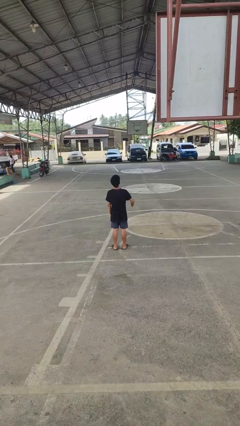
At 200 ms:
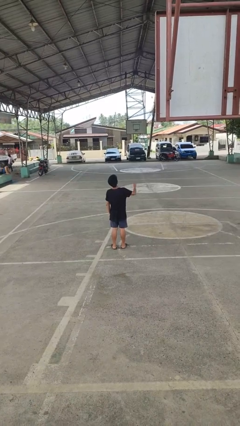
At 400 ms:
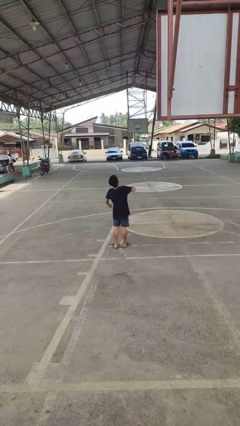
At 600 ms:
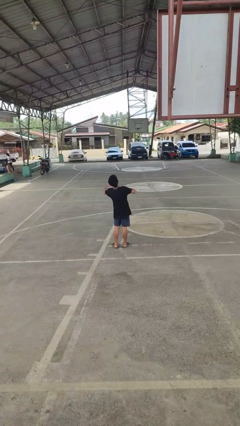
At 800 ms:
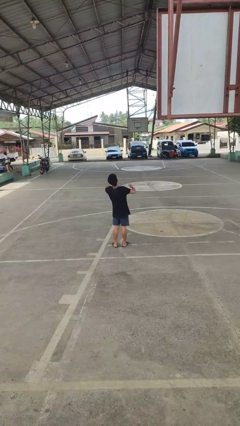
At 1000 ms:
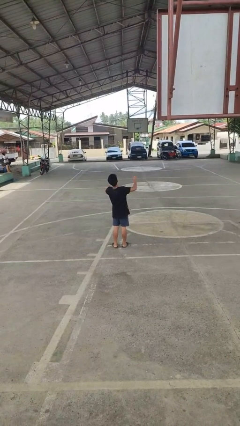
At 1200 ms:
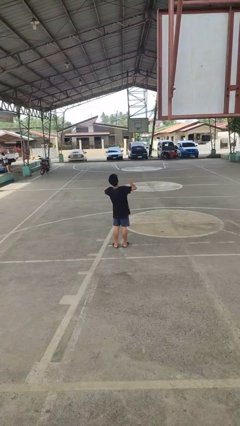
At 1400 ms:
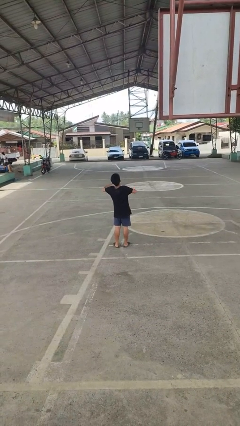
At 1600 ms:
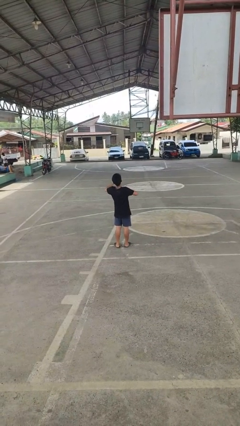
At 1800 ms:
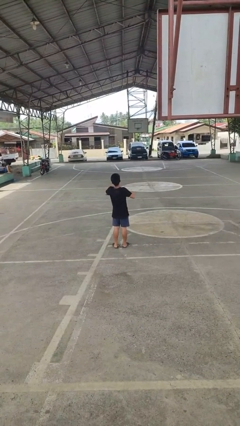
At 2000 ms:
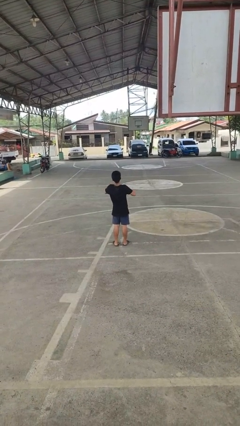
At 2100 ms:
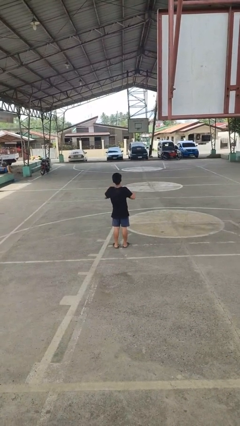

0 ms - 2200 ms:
person drums on chest

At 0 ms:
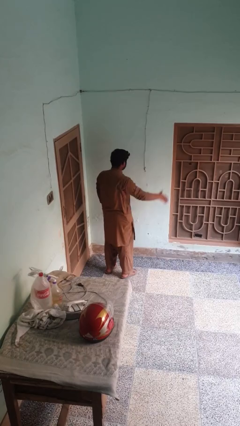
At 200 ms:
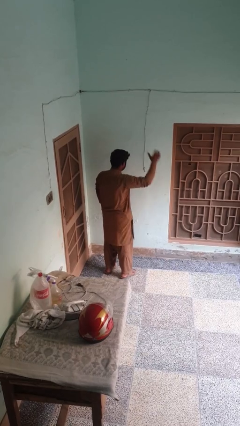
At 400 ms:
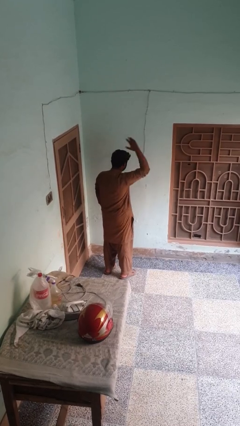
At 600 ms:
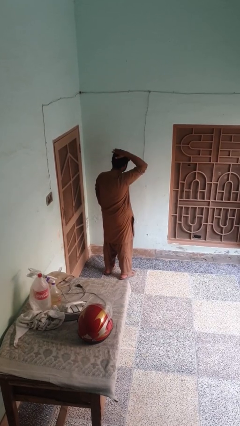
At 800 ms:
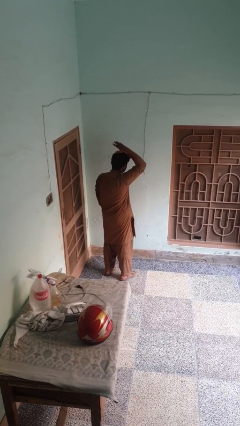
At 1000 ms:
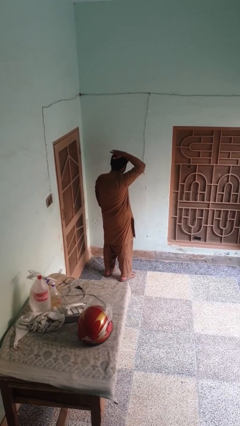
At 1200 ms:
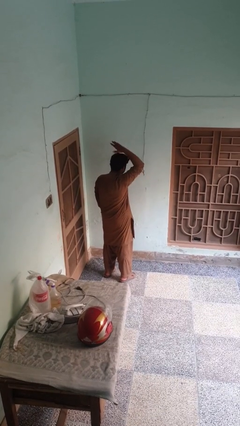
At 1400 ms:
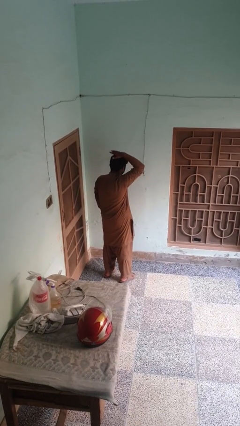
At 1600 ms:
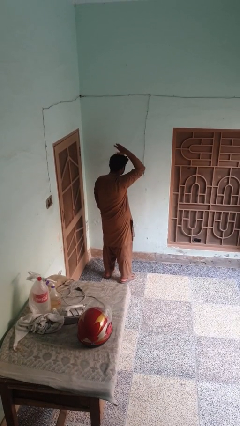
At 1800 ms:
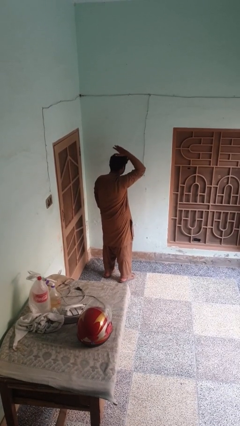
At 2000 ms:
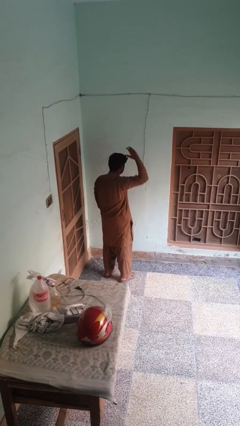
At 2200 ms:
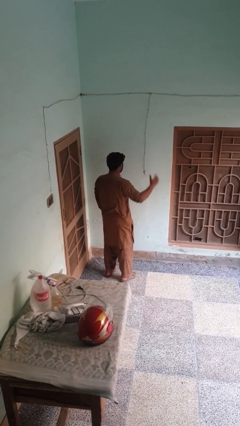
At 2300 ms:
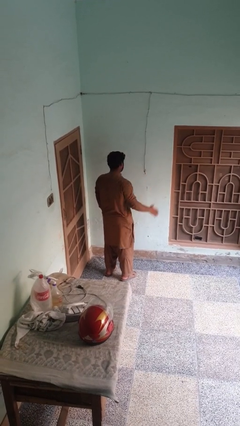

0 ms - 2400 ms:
person pats head

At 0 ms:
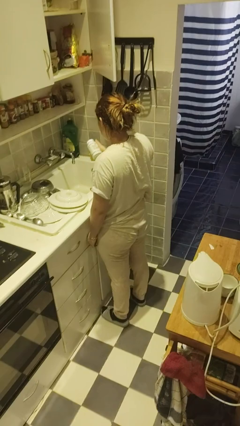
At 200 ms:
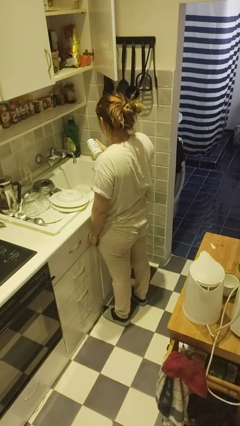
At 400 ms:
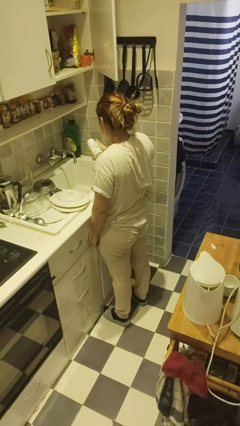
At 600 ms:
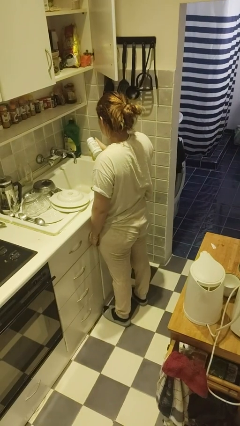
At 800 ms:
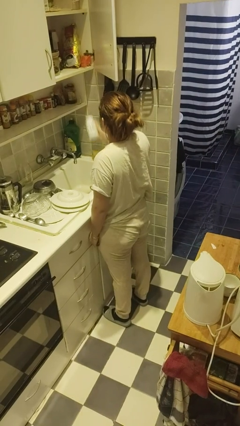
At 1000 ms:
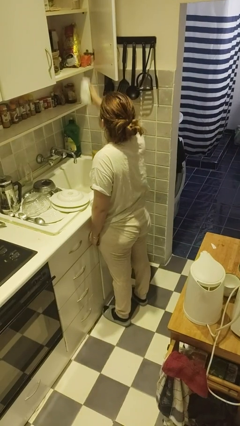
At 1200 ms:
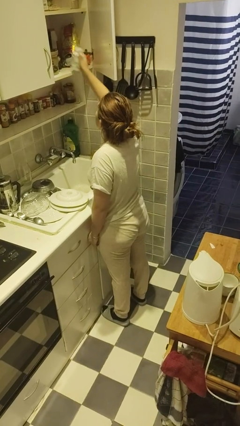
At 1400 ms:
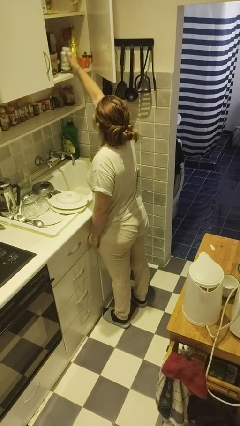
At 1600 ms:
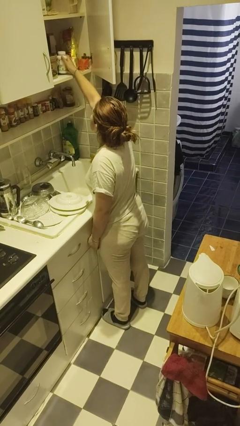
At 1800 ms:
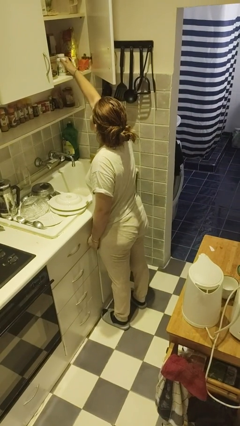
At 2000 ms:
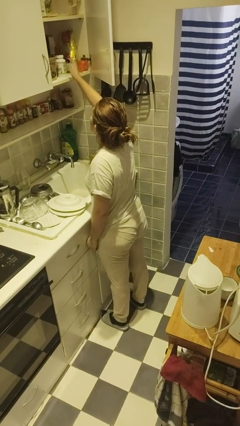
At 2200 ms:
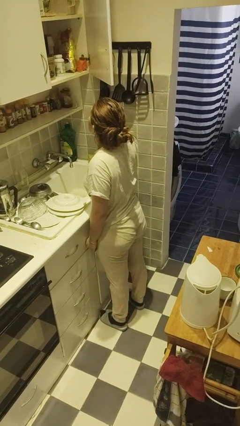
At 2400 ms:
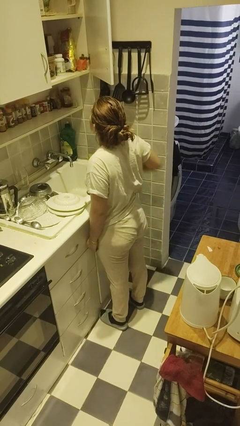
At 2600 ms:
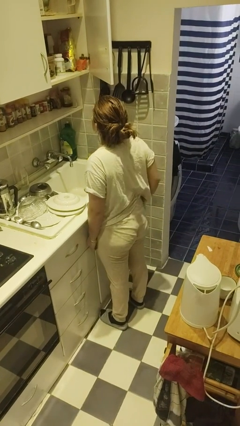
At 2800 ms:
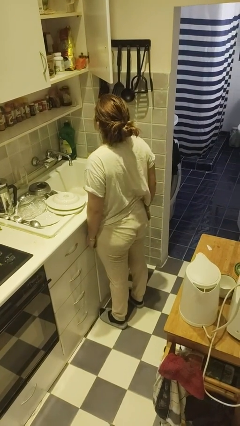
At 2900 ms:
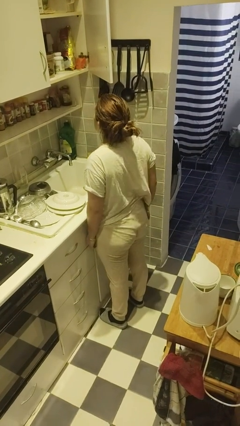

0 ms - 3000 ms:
person puts down object into cabinet

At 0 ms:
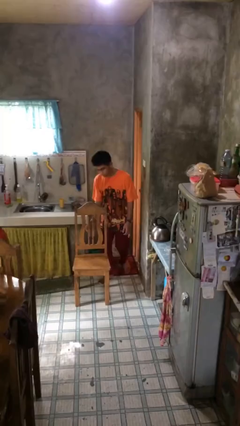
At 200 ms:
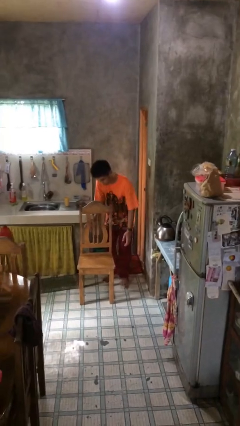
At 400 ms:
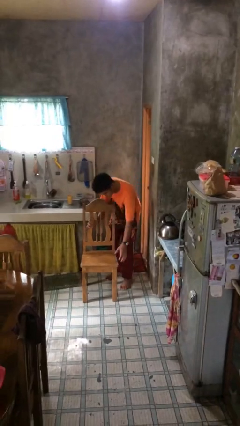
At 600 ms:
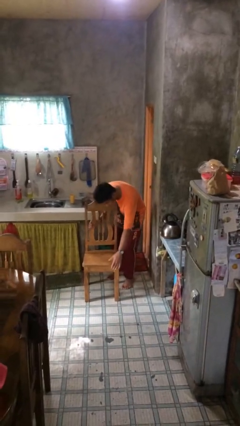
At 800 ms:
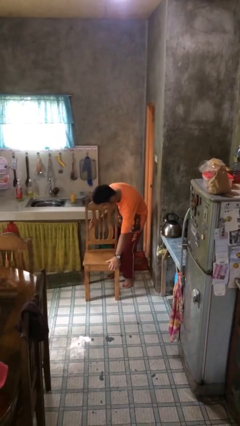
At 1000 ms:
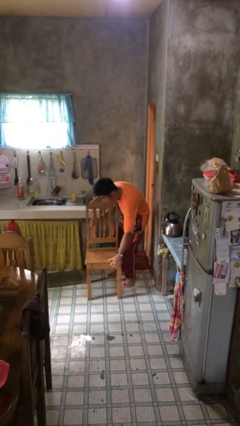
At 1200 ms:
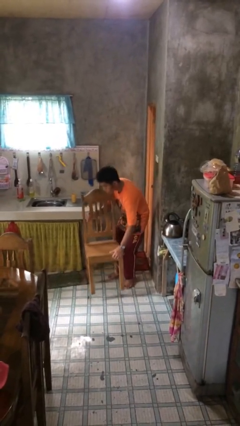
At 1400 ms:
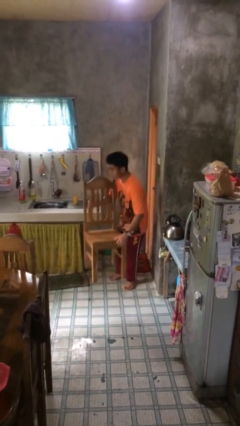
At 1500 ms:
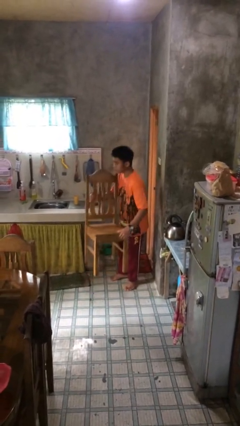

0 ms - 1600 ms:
person picks up object from floor

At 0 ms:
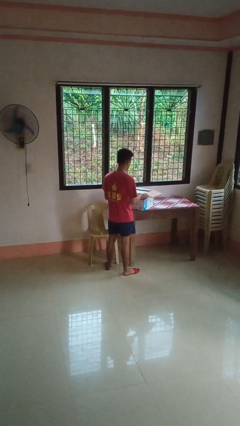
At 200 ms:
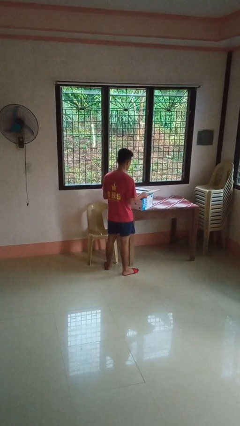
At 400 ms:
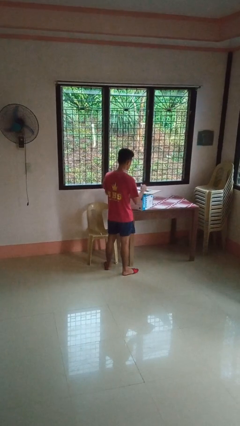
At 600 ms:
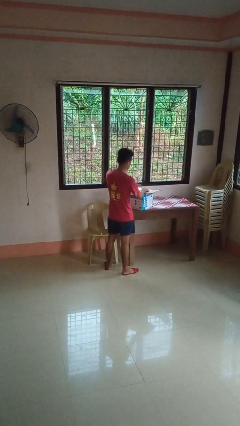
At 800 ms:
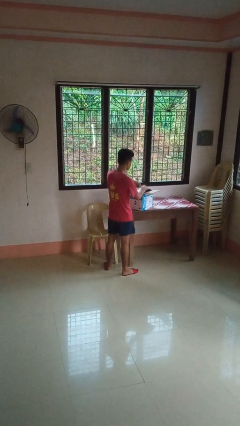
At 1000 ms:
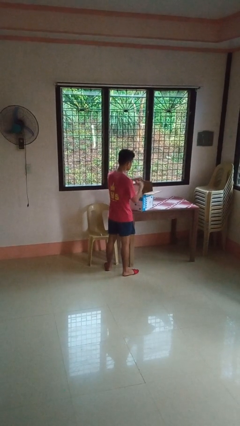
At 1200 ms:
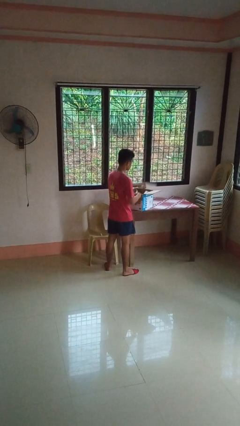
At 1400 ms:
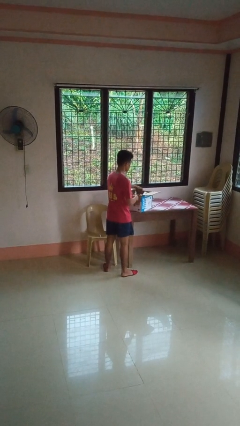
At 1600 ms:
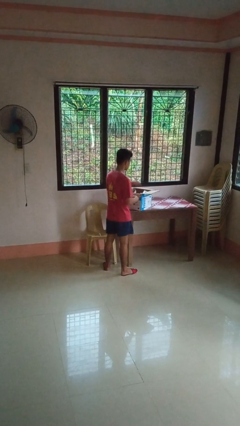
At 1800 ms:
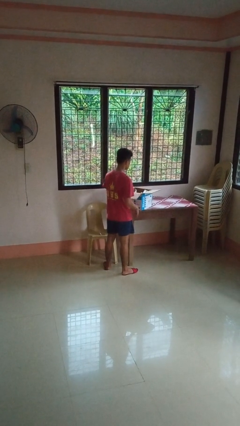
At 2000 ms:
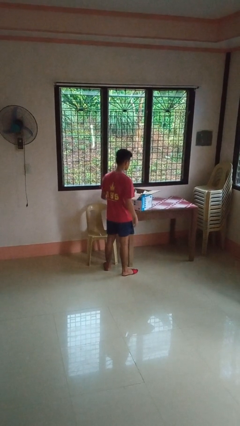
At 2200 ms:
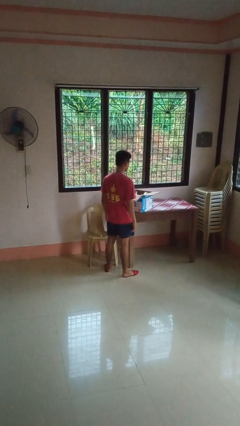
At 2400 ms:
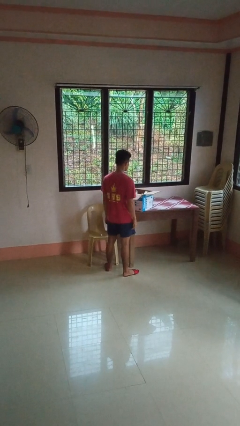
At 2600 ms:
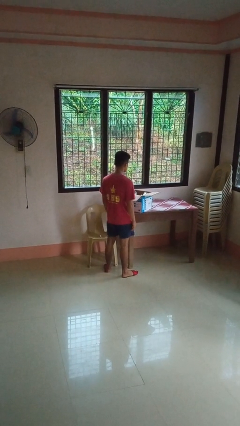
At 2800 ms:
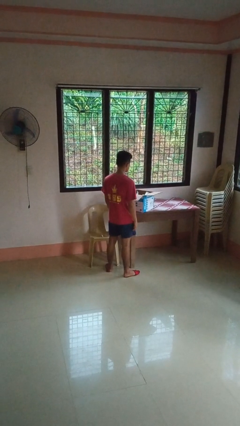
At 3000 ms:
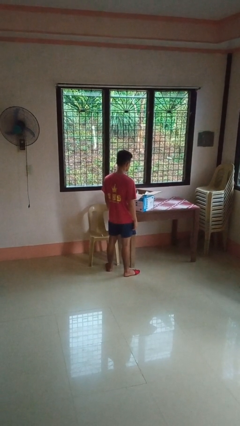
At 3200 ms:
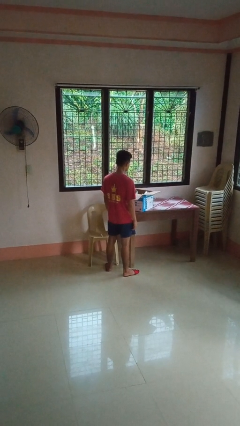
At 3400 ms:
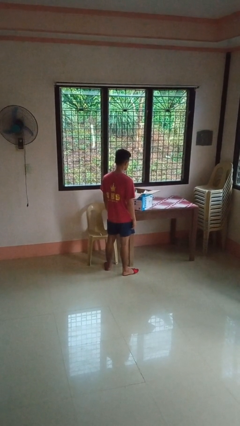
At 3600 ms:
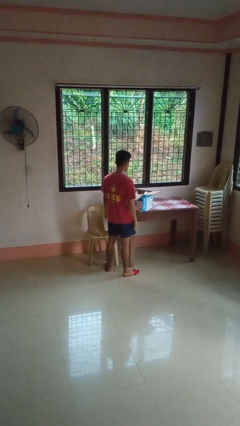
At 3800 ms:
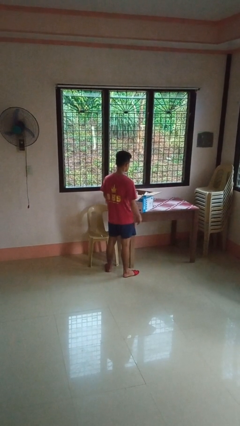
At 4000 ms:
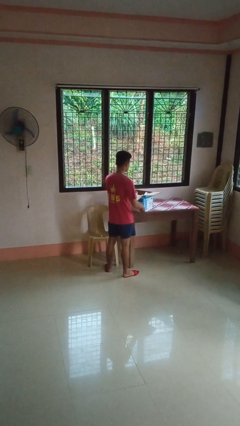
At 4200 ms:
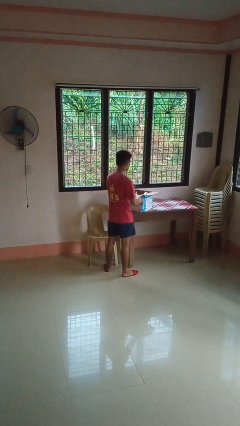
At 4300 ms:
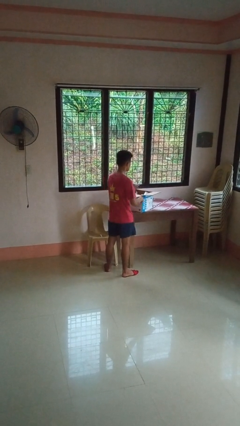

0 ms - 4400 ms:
person opens box

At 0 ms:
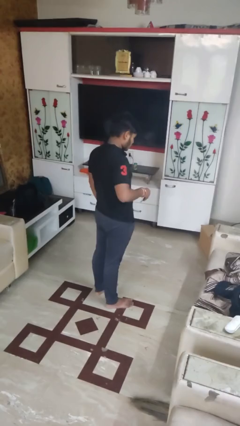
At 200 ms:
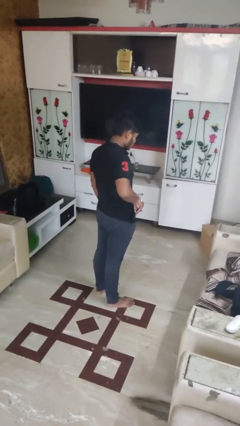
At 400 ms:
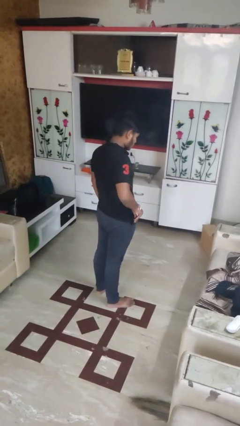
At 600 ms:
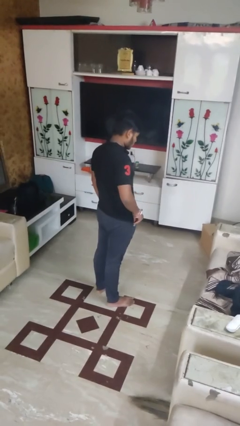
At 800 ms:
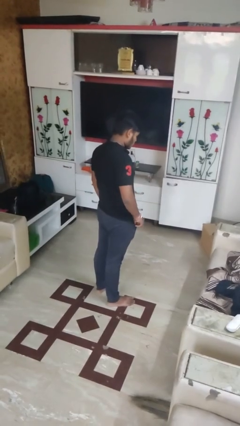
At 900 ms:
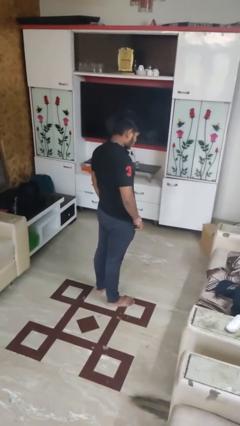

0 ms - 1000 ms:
person puts phone into pocket

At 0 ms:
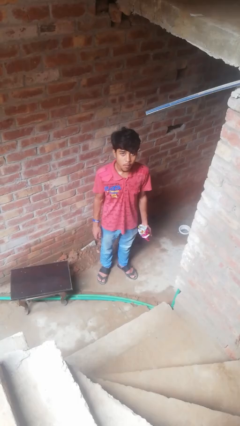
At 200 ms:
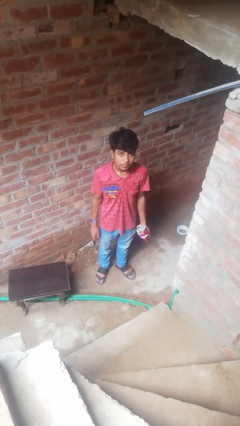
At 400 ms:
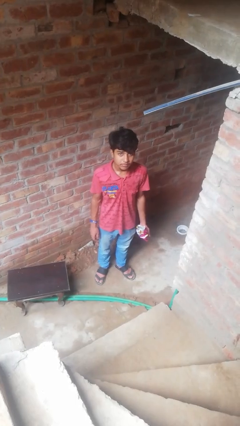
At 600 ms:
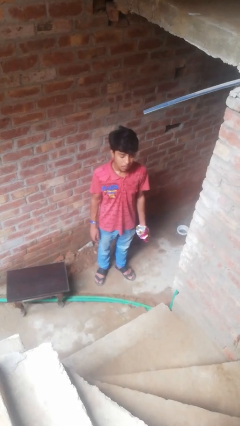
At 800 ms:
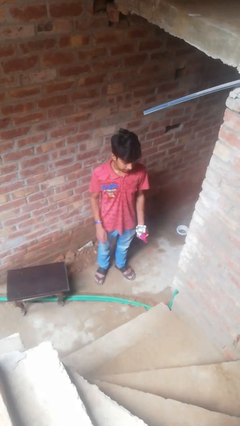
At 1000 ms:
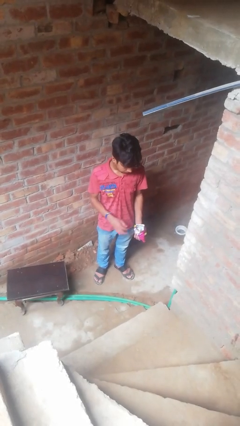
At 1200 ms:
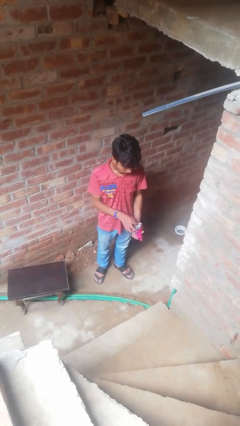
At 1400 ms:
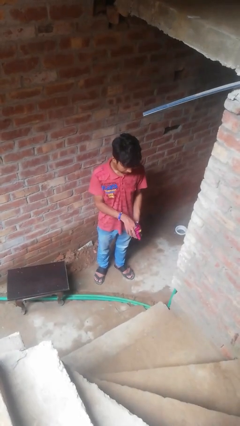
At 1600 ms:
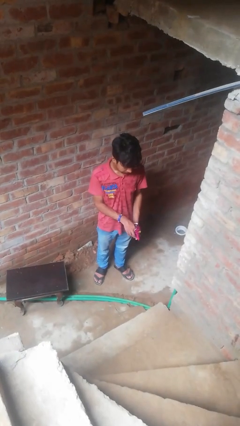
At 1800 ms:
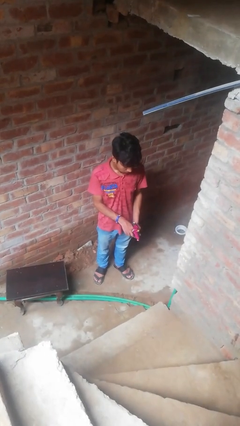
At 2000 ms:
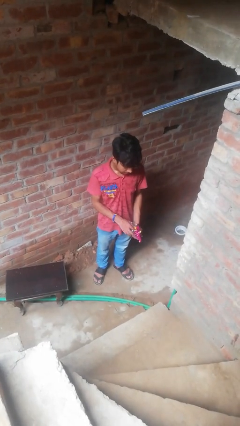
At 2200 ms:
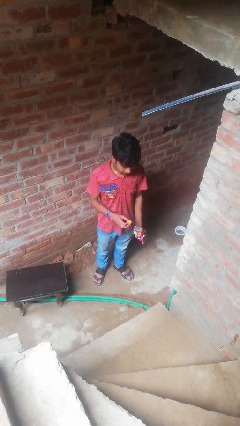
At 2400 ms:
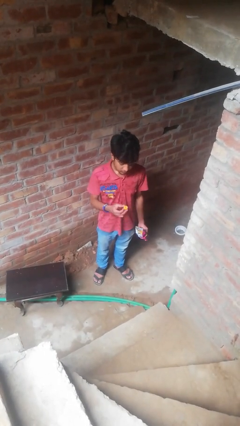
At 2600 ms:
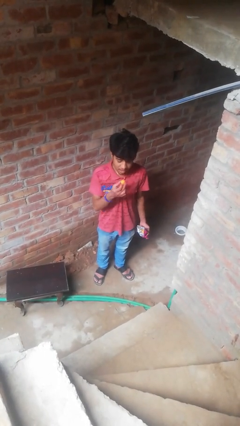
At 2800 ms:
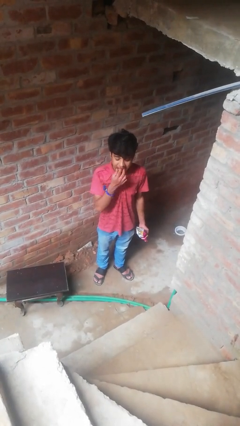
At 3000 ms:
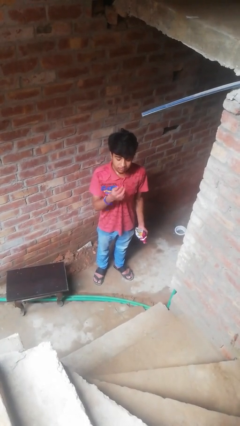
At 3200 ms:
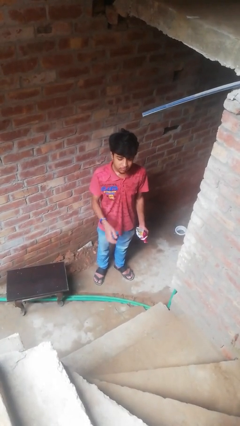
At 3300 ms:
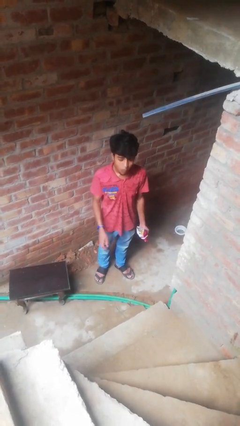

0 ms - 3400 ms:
person eats snack from bag
